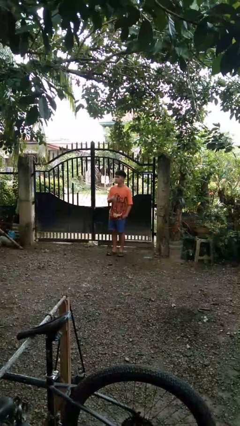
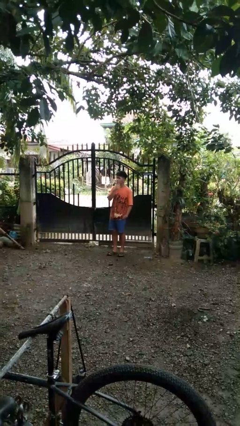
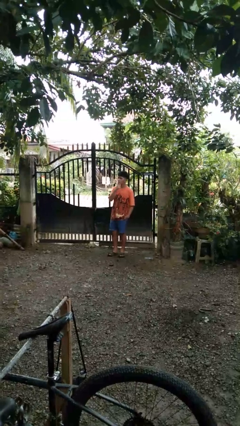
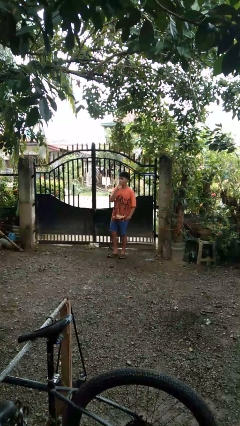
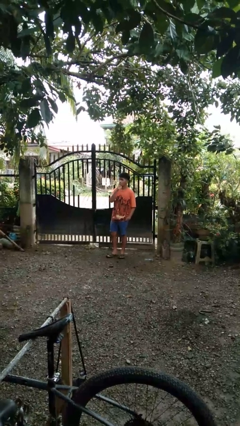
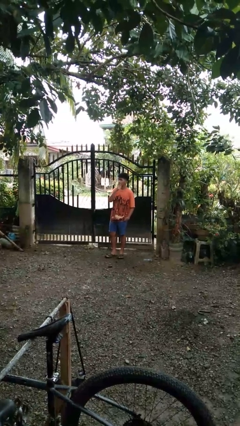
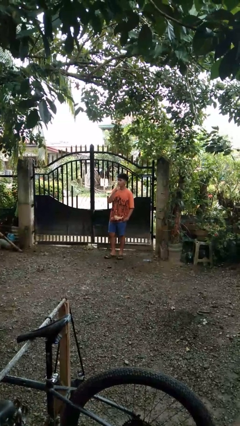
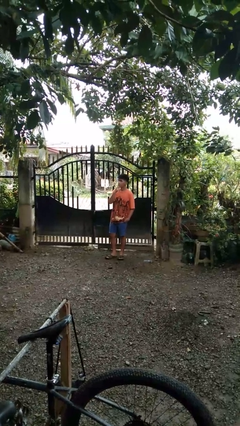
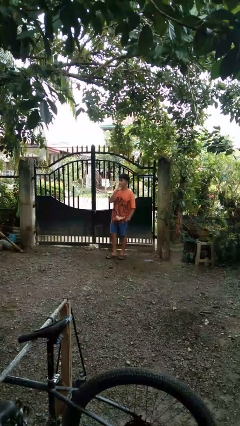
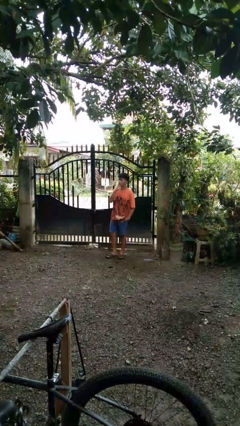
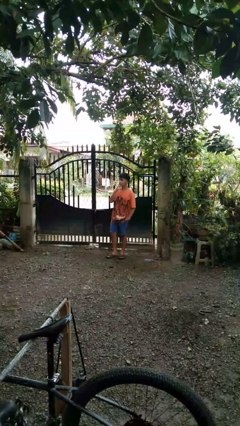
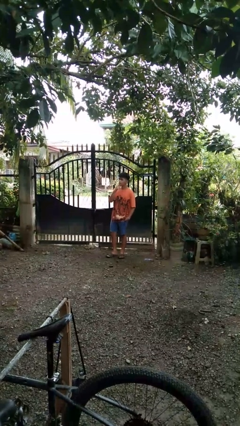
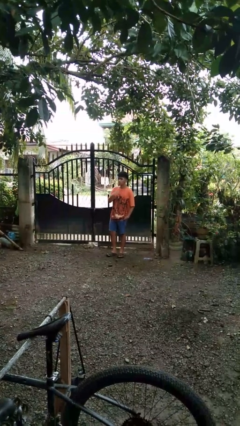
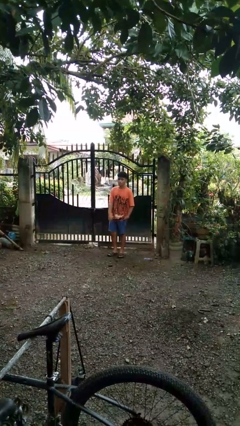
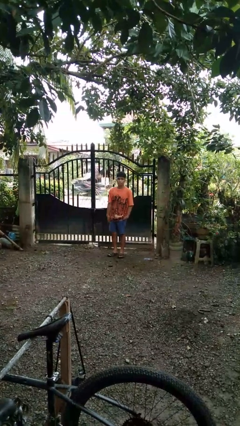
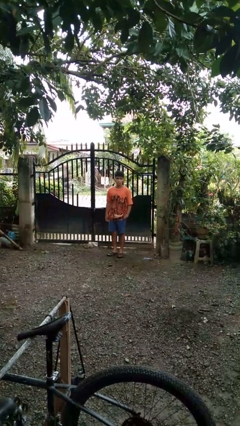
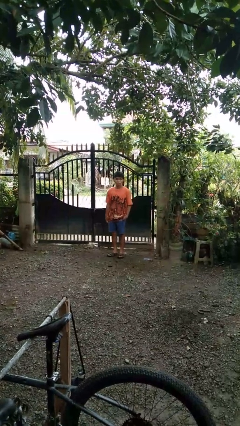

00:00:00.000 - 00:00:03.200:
person strokes chin

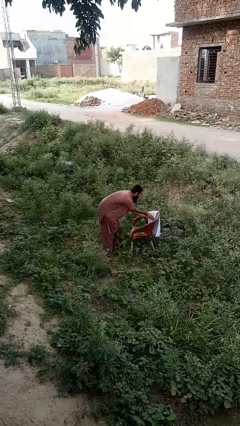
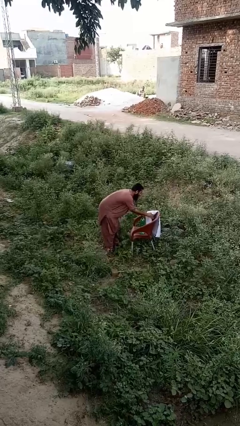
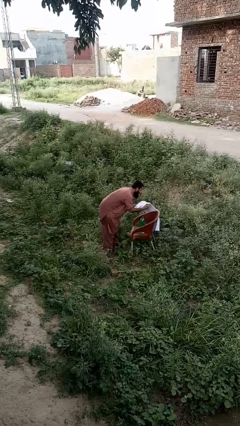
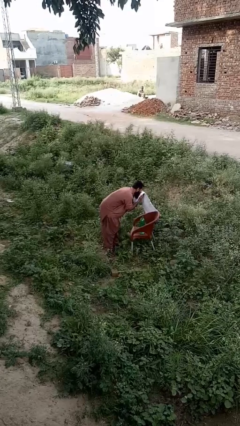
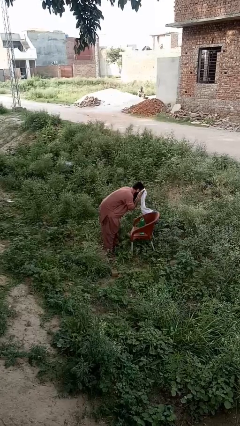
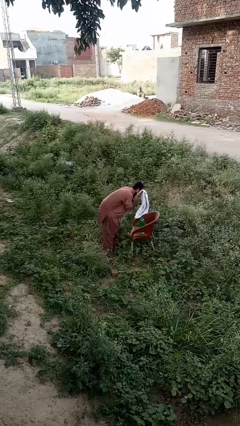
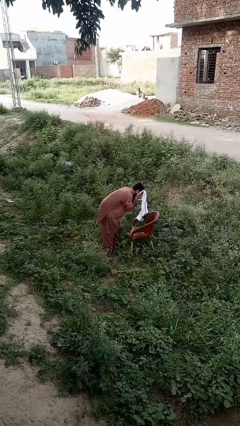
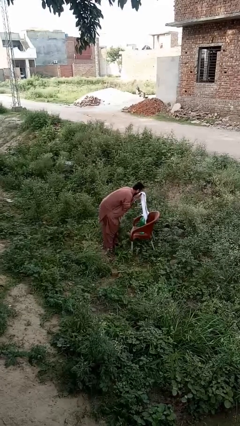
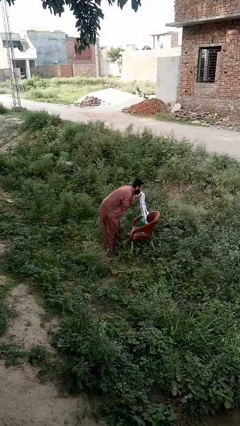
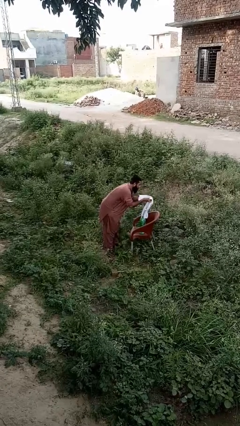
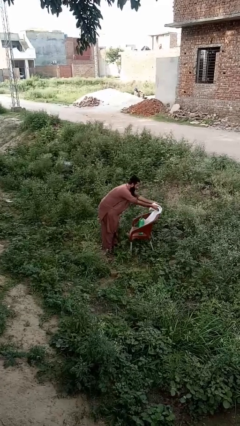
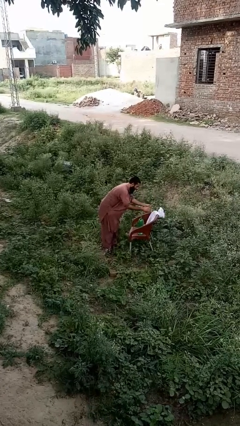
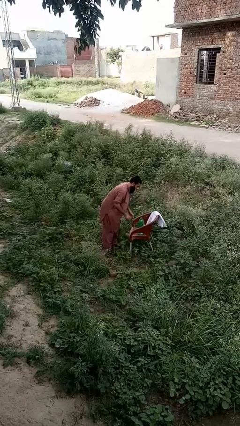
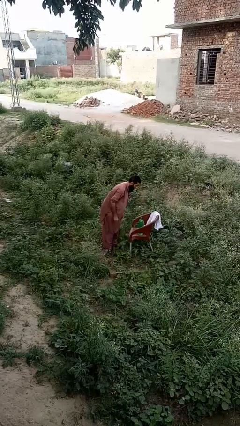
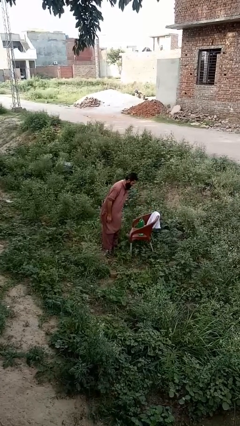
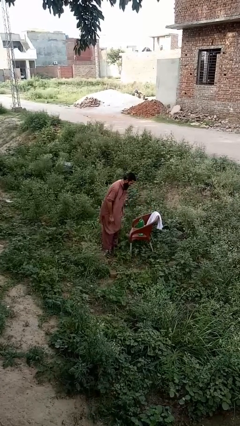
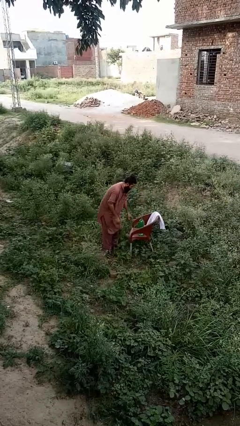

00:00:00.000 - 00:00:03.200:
person dries face with towel

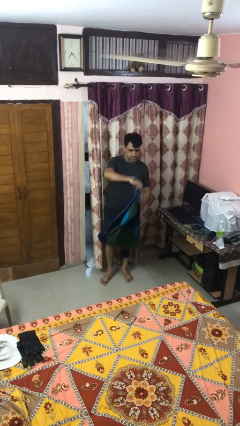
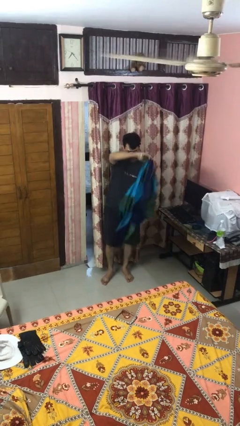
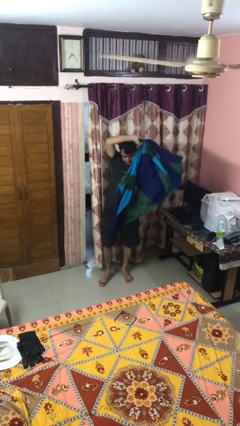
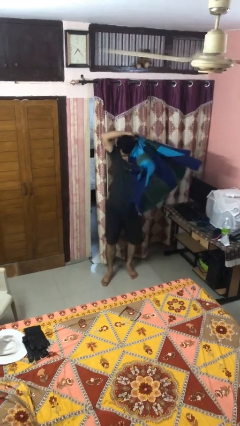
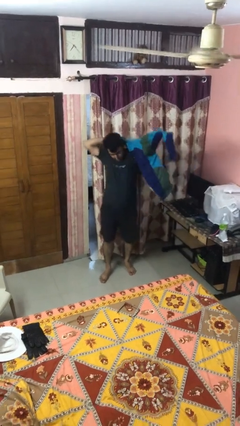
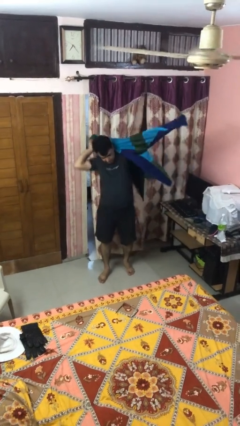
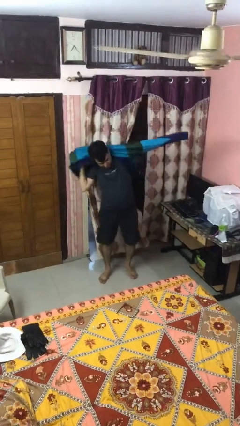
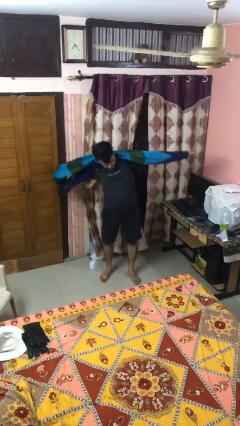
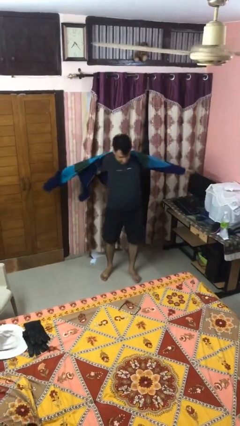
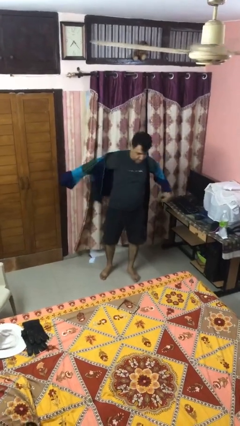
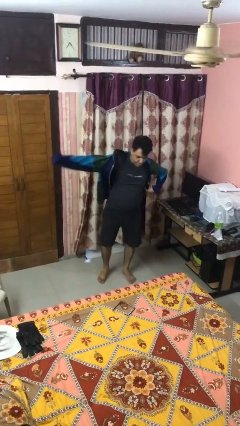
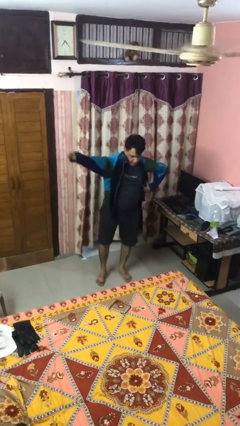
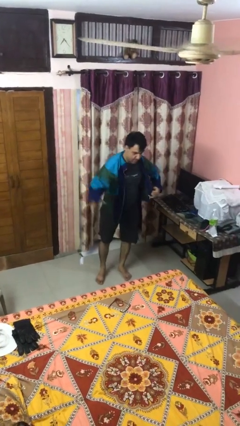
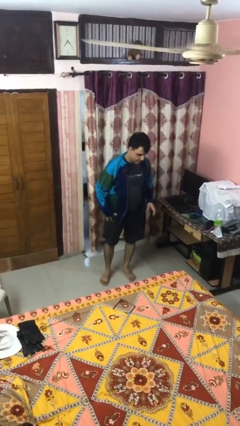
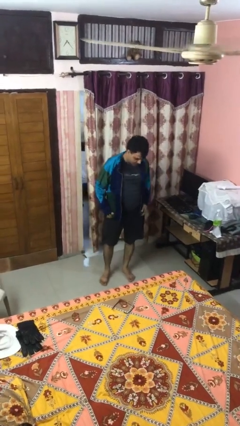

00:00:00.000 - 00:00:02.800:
person puts on jacket

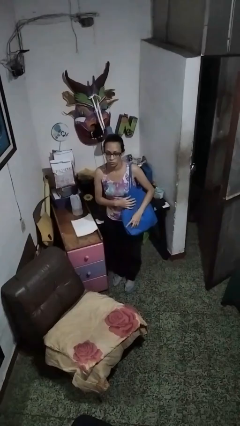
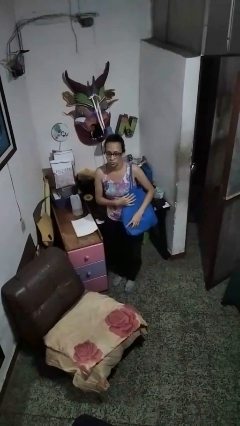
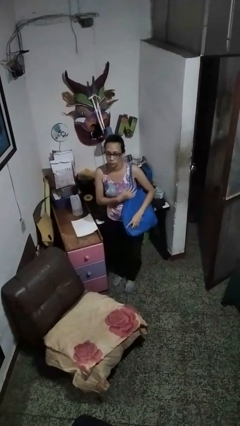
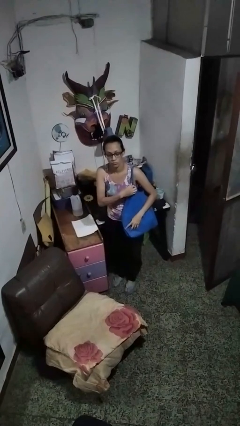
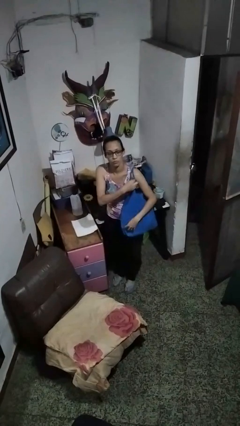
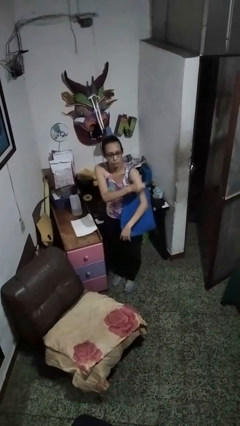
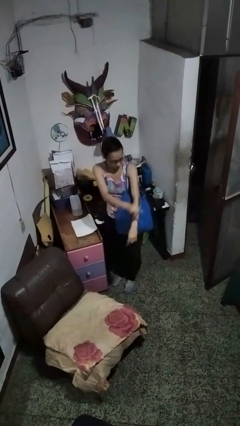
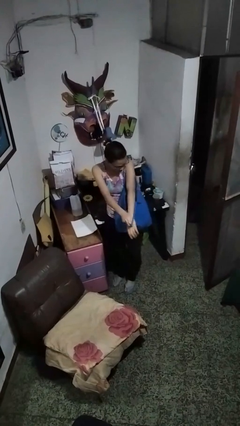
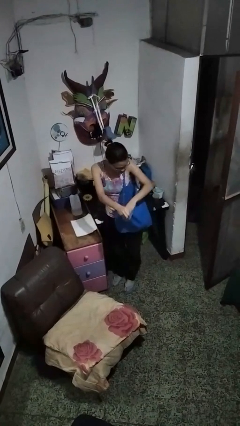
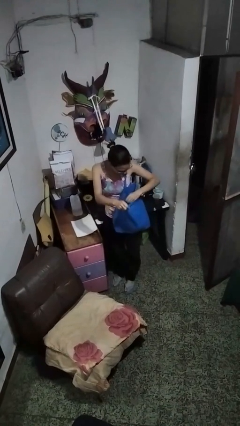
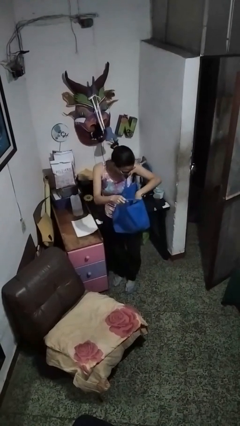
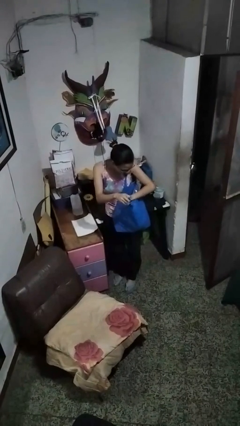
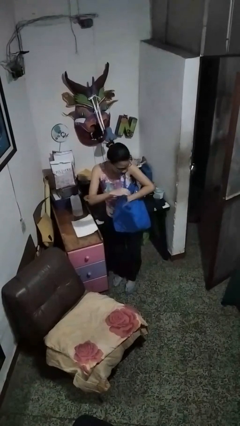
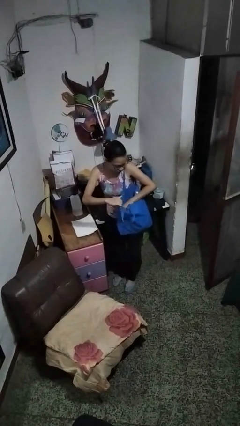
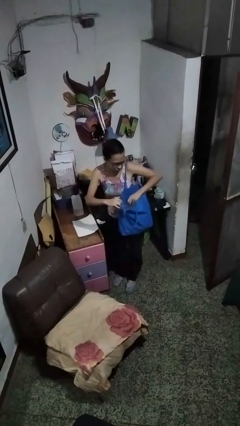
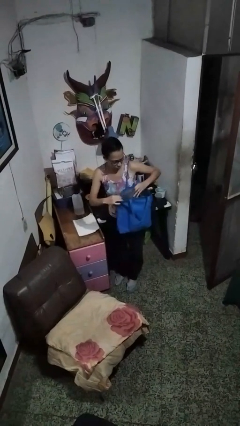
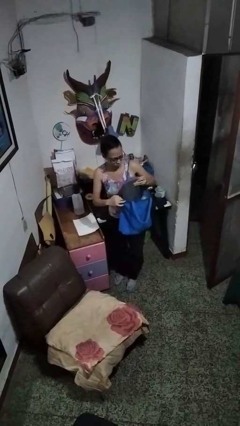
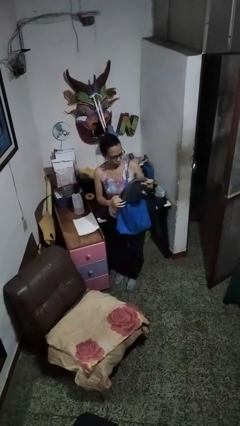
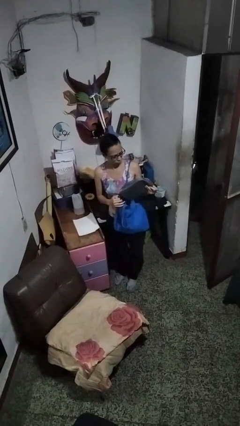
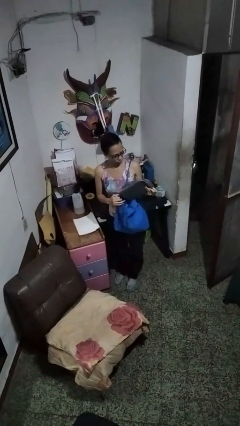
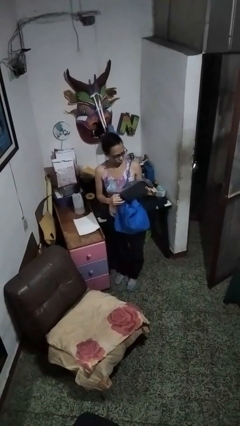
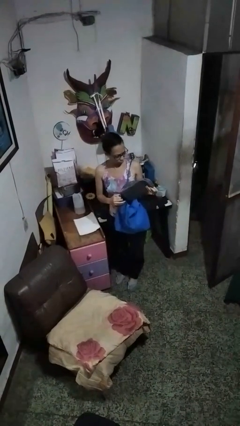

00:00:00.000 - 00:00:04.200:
person takes object from bag

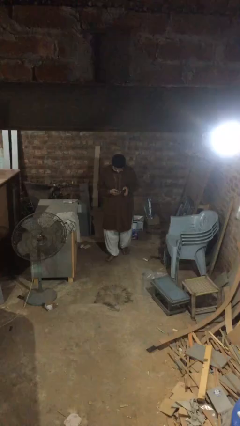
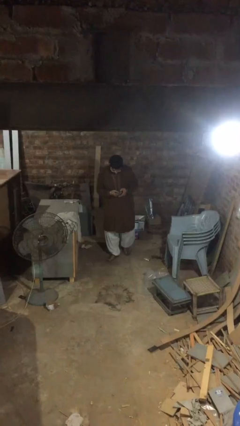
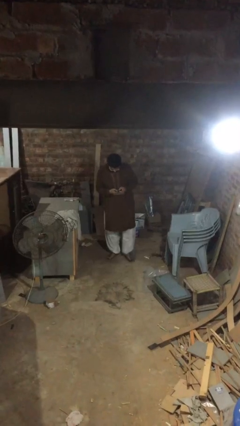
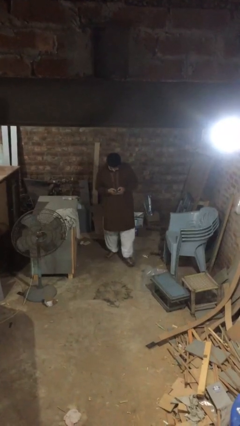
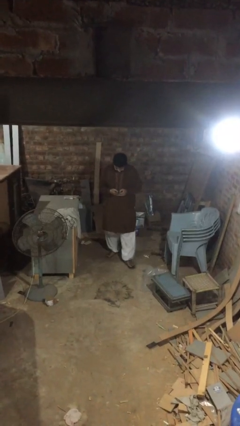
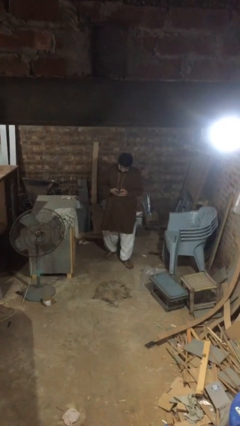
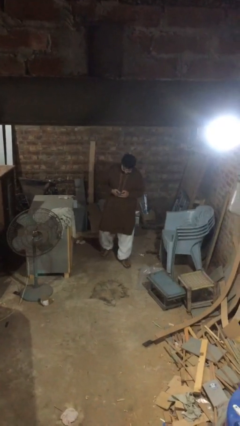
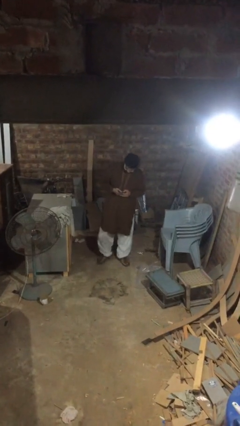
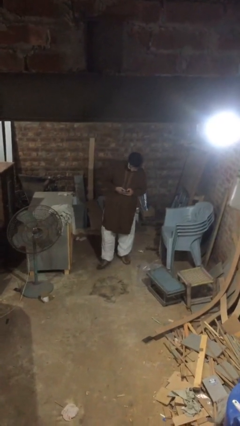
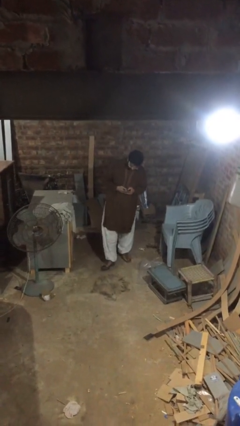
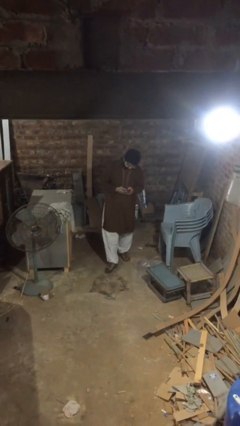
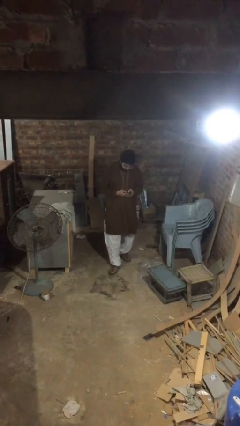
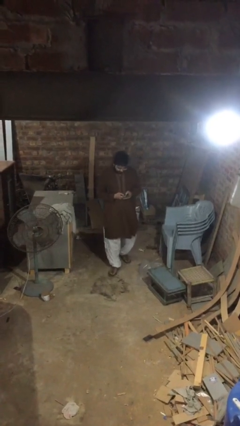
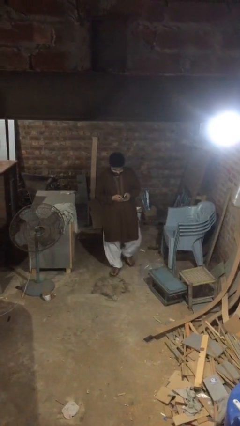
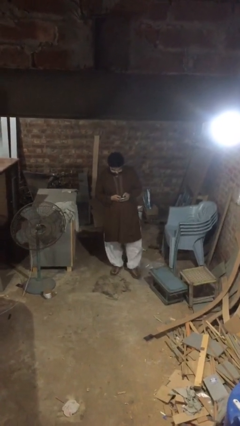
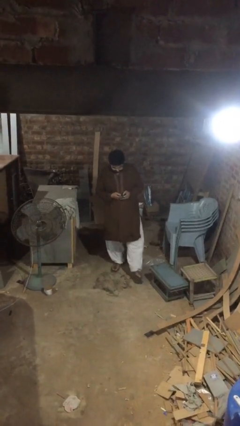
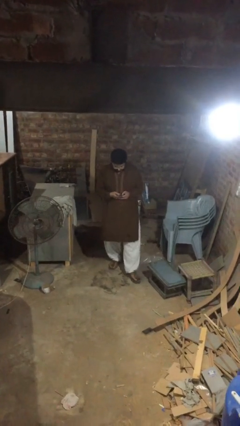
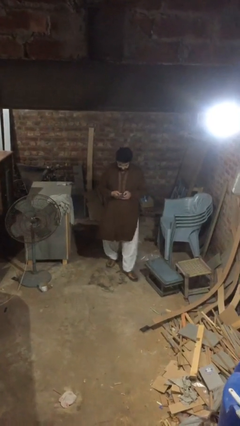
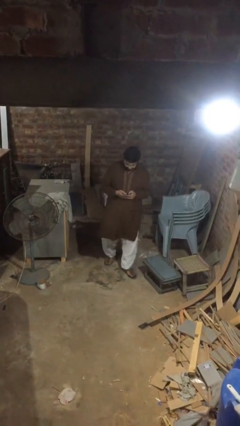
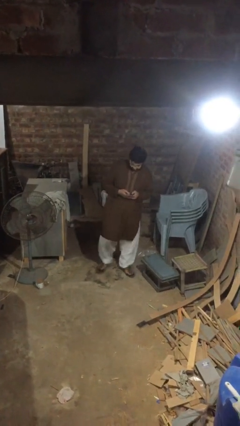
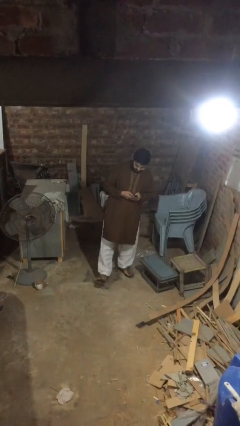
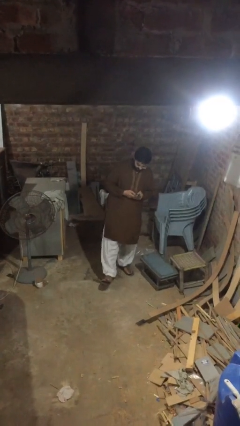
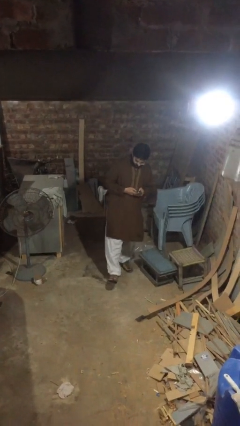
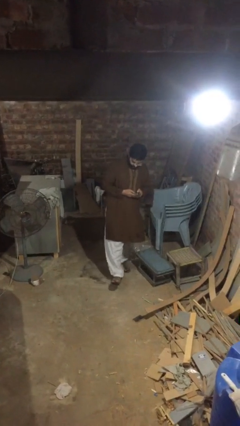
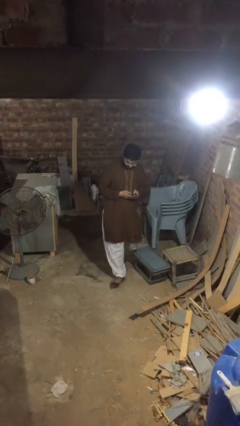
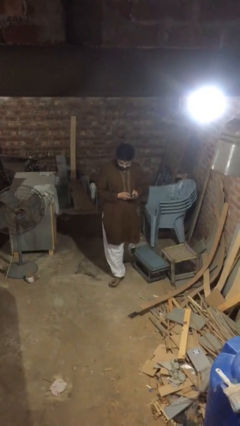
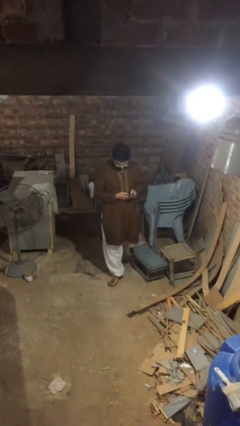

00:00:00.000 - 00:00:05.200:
person texts on phone
